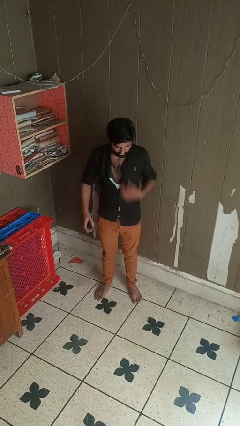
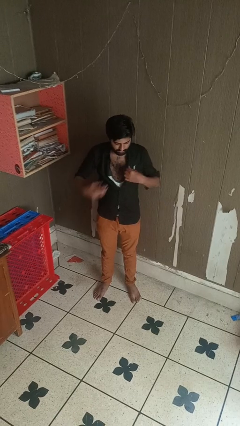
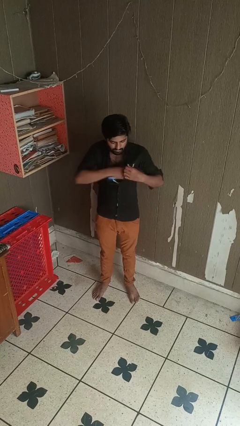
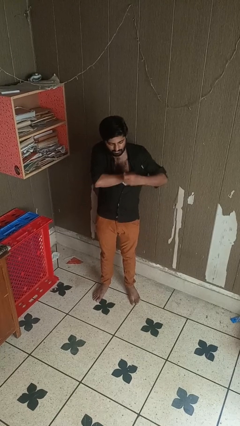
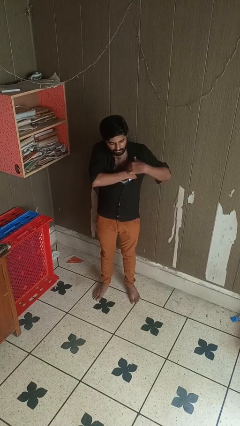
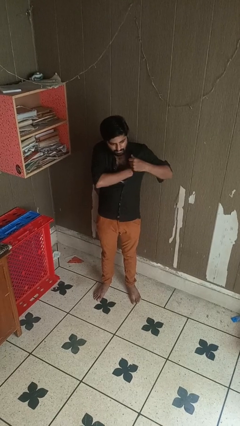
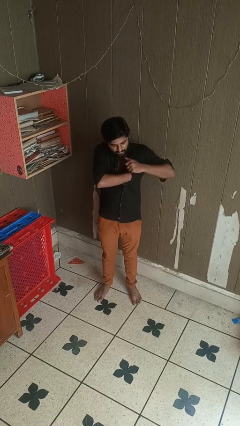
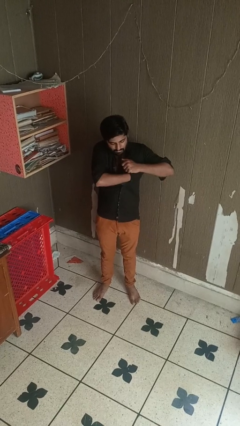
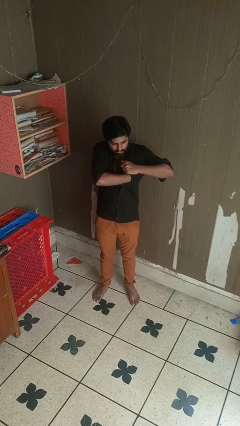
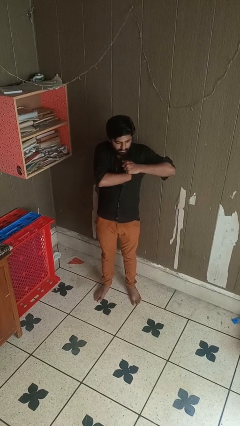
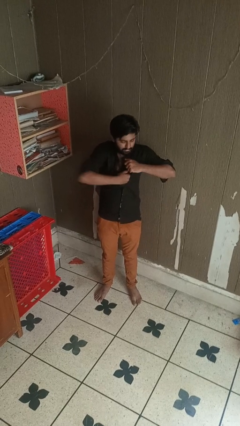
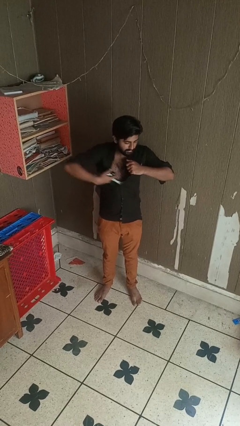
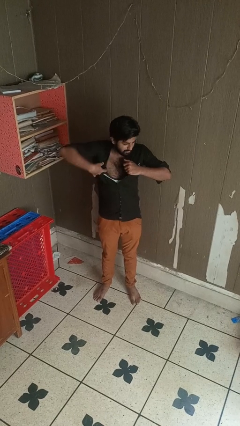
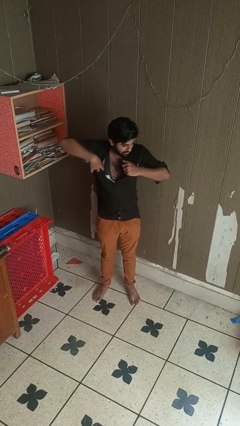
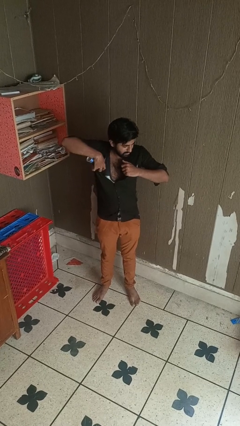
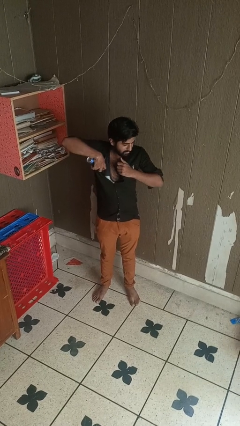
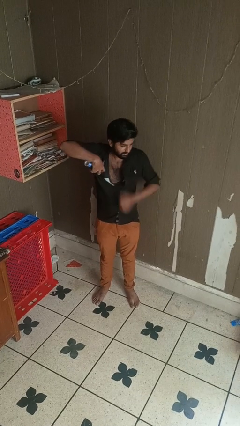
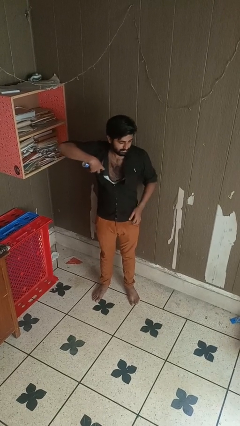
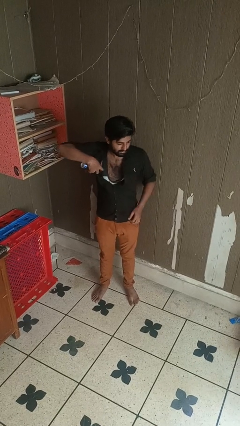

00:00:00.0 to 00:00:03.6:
person applies deodorant

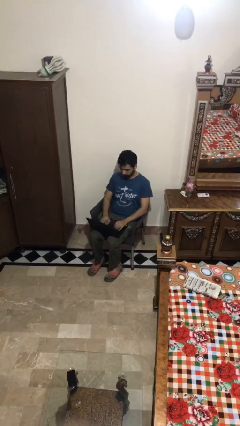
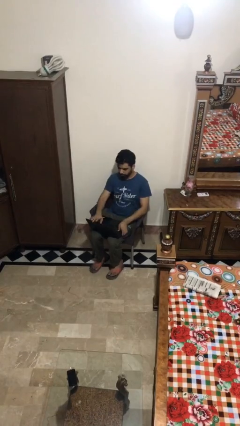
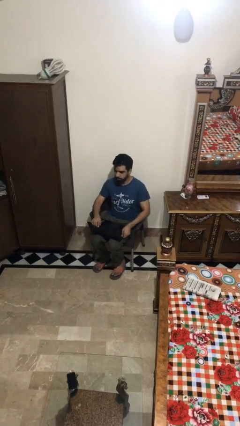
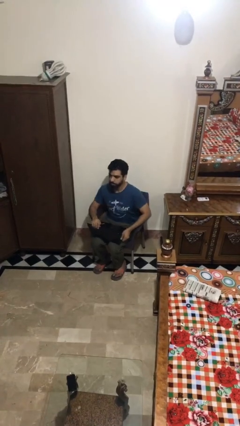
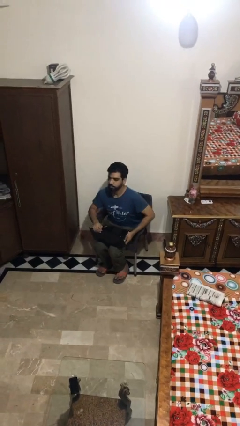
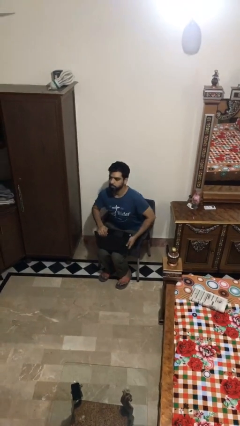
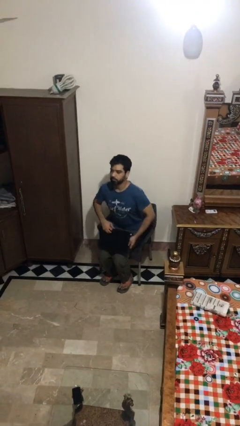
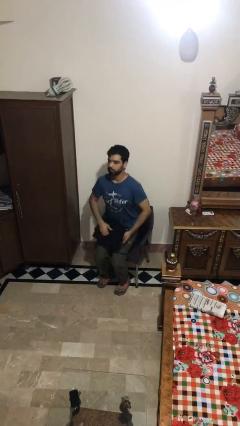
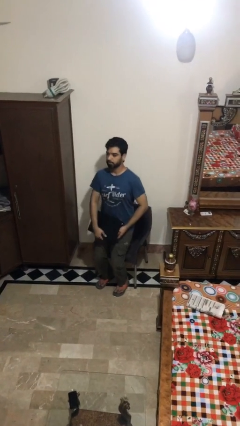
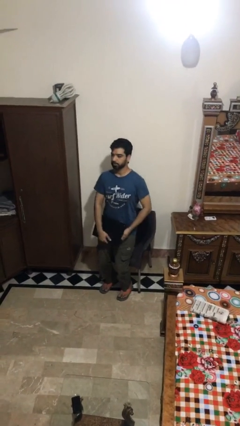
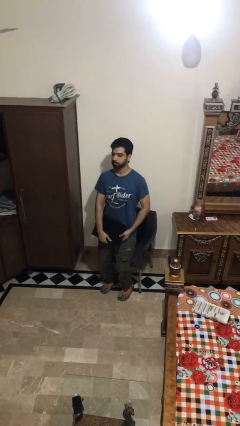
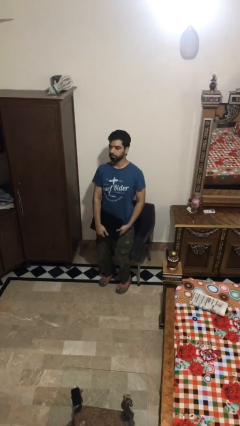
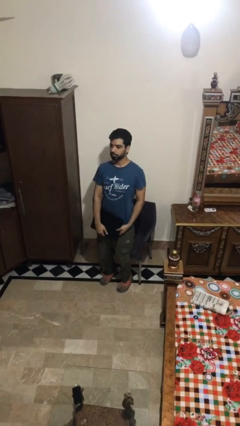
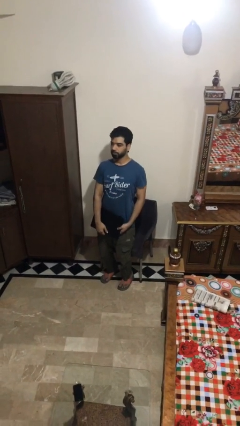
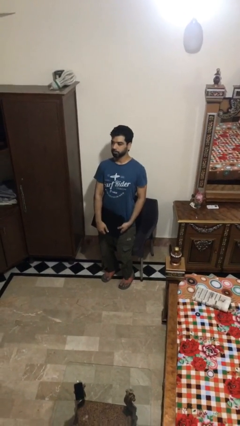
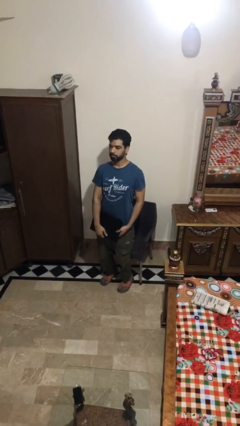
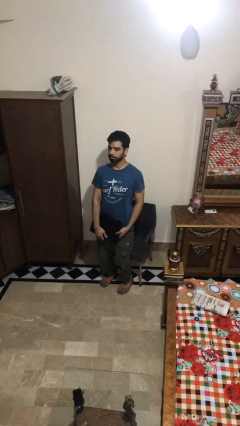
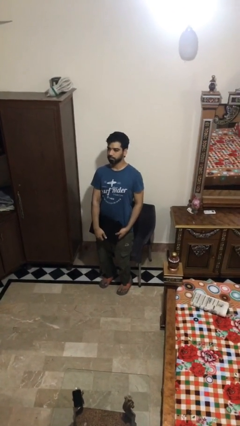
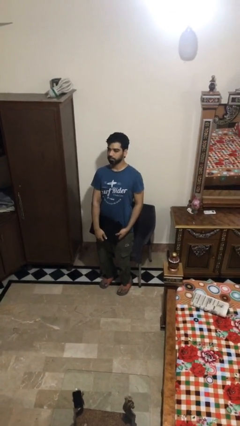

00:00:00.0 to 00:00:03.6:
person stands up

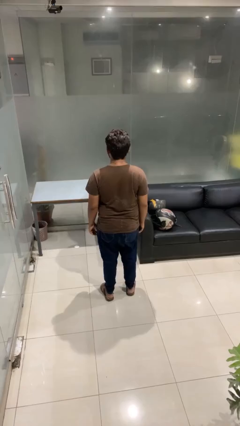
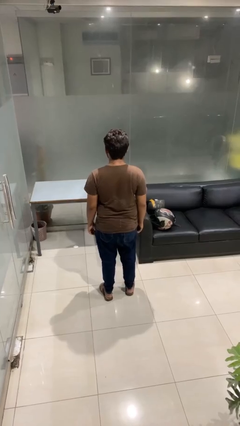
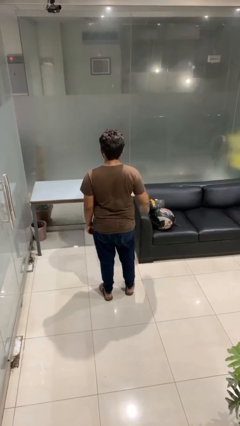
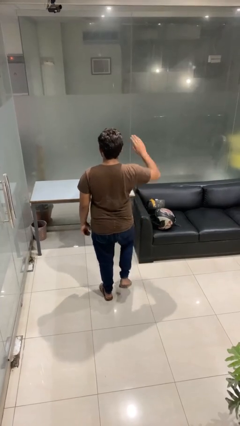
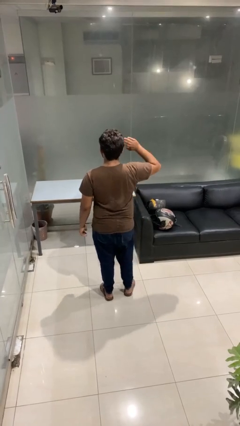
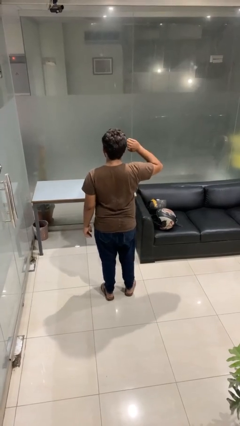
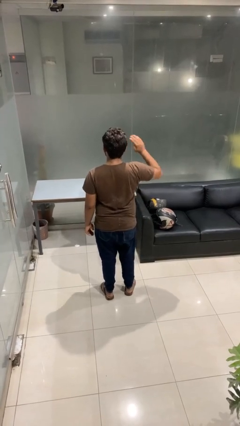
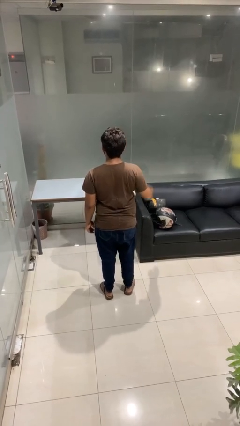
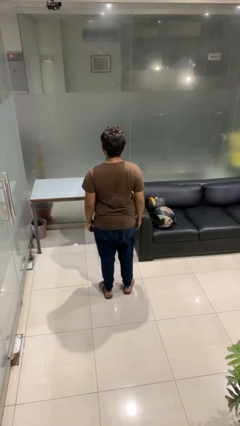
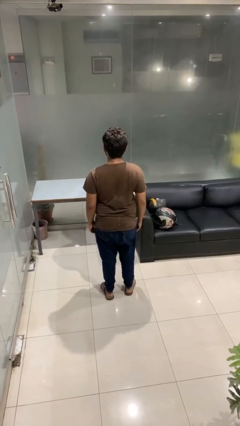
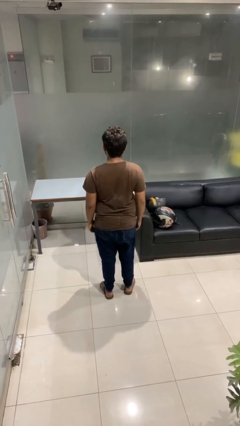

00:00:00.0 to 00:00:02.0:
person salutes

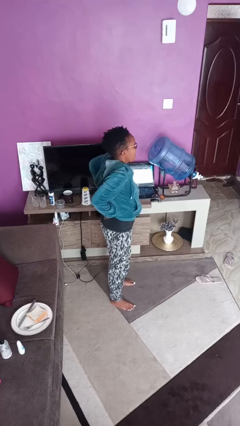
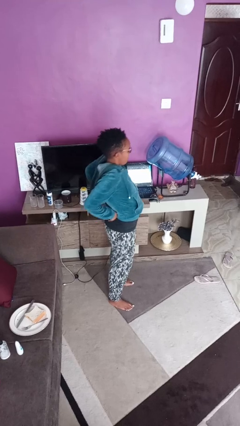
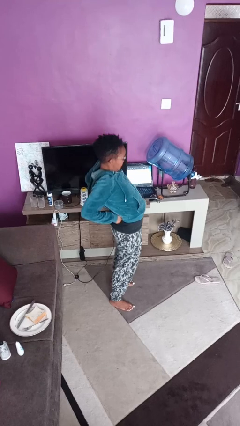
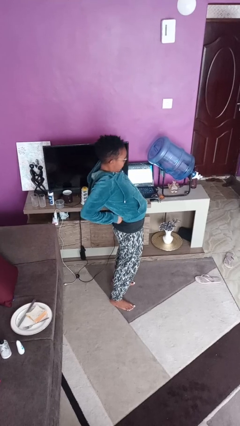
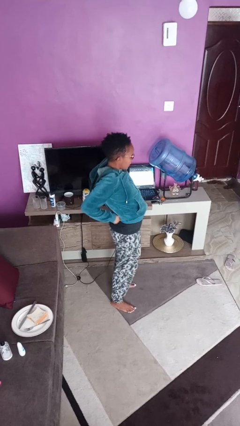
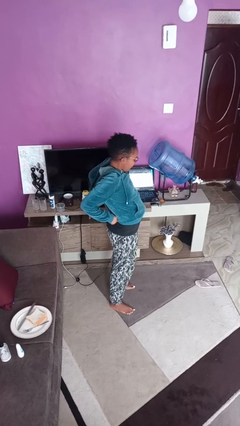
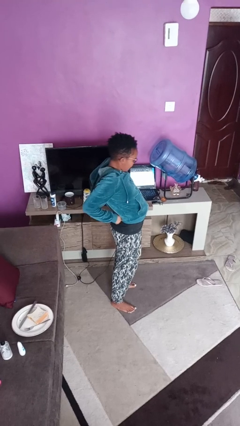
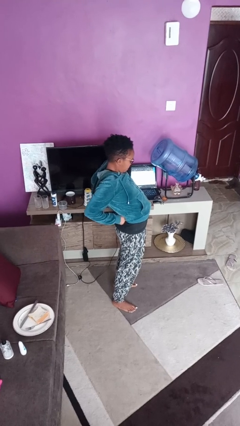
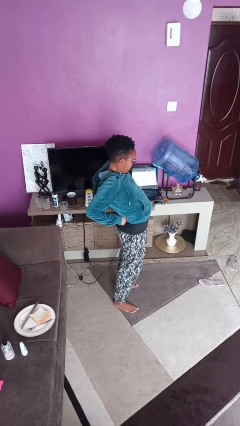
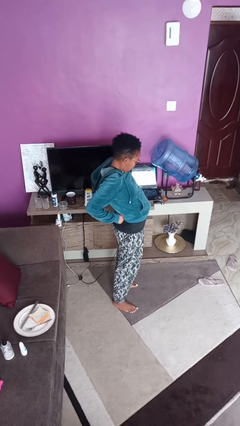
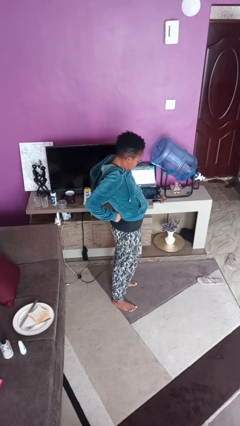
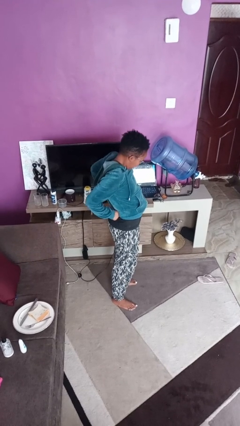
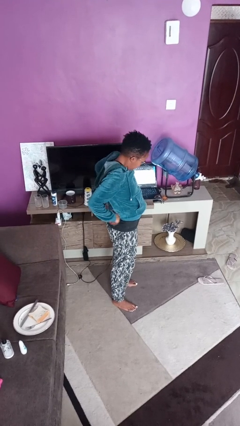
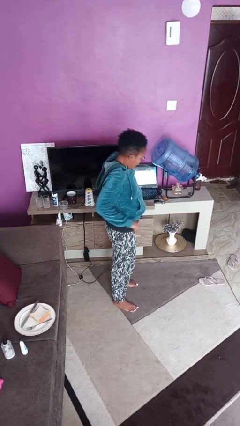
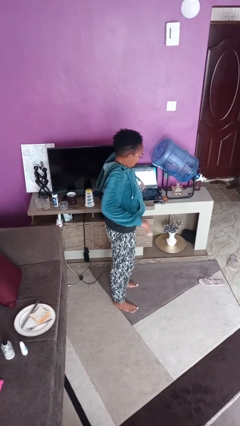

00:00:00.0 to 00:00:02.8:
person stretches back

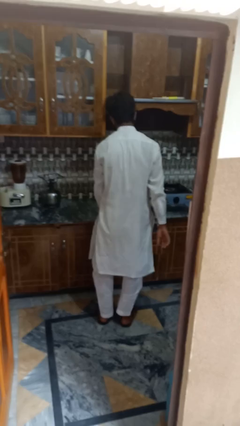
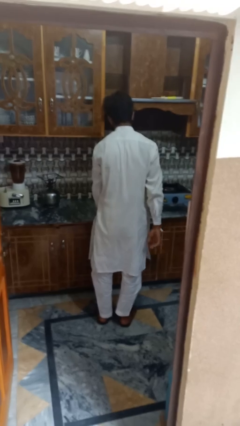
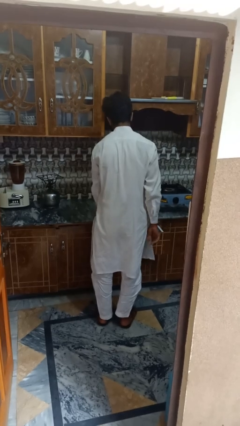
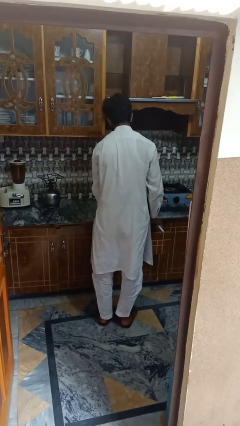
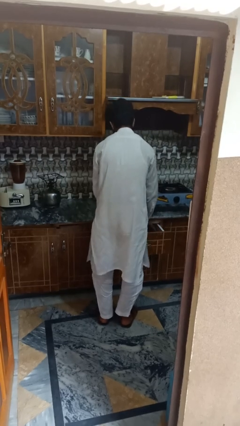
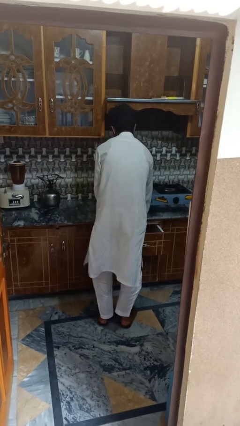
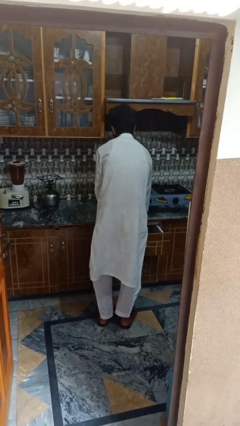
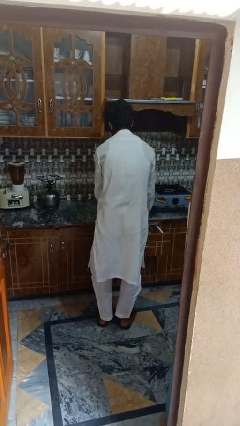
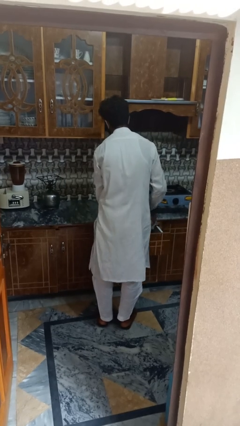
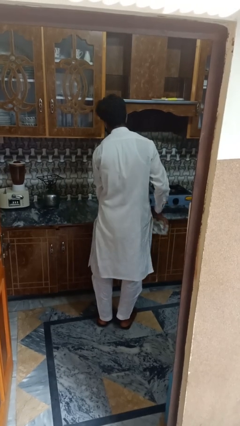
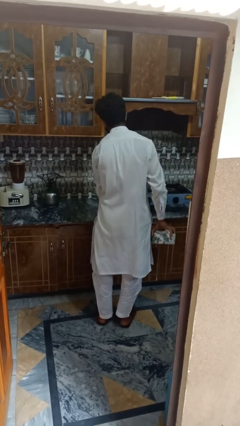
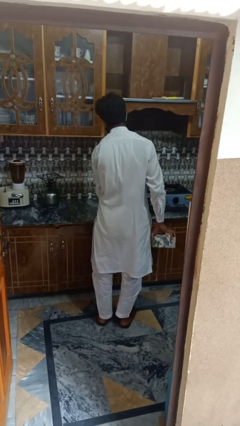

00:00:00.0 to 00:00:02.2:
person puts object into kitchen drawer

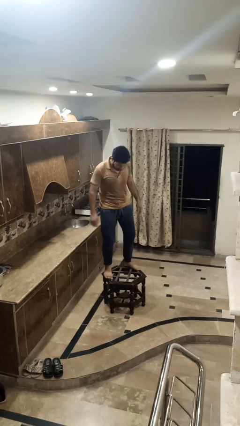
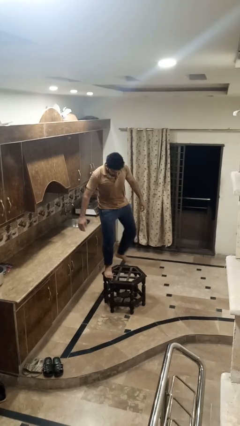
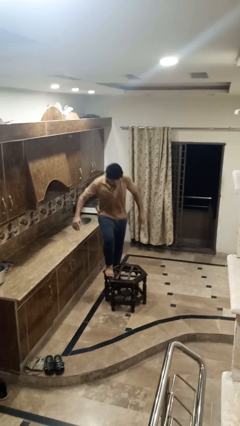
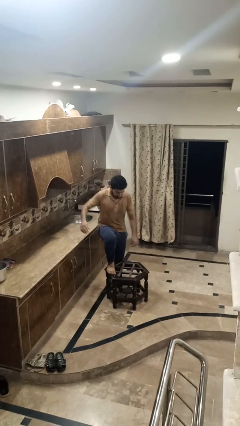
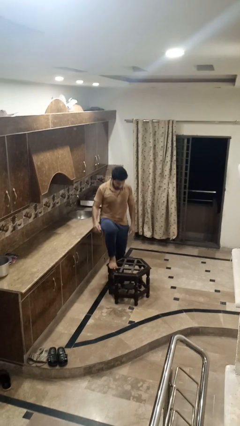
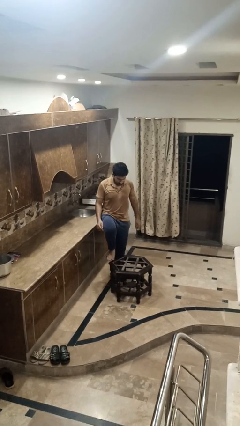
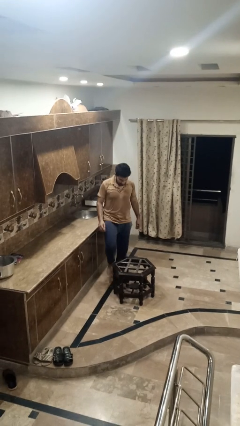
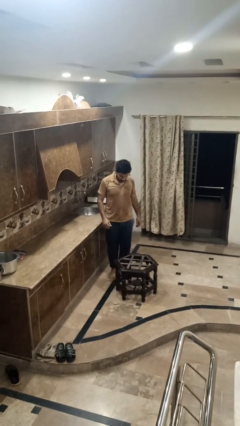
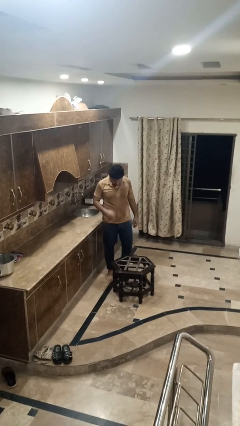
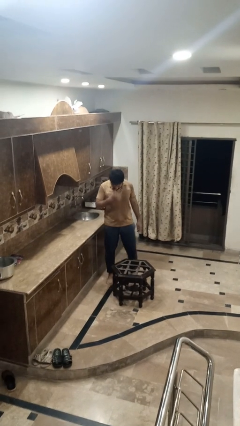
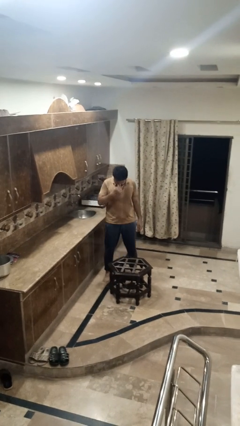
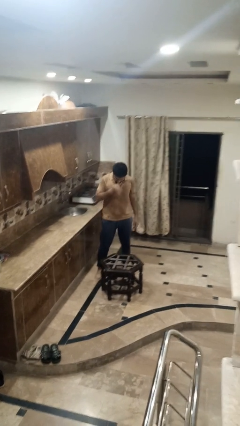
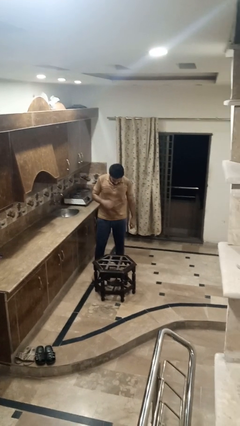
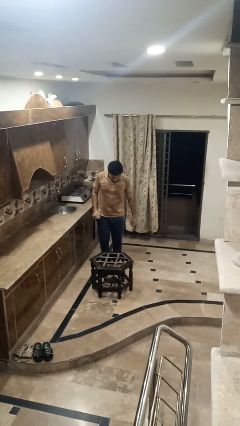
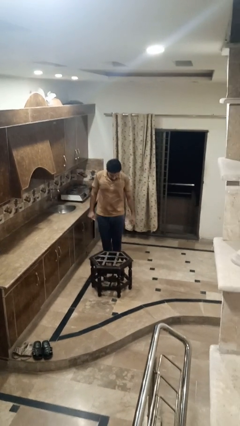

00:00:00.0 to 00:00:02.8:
person climbs off table
